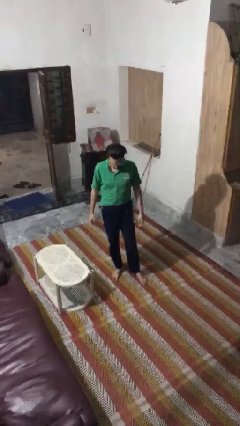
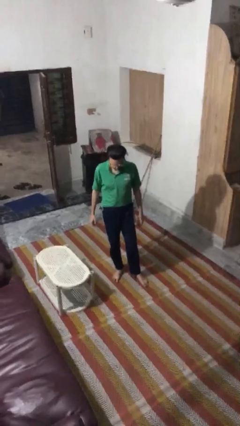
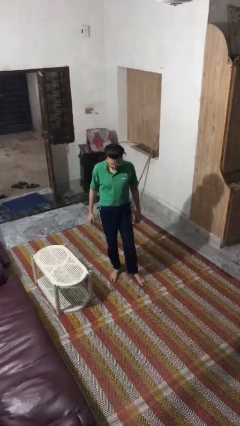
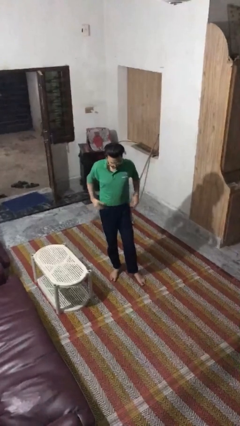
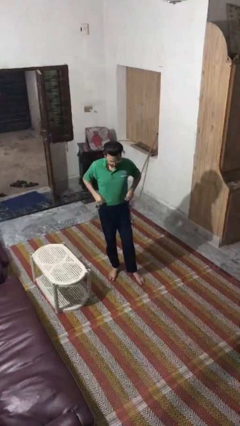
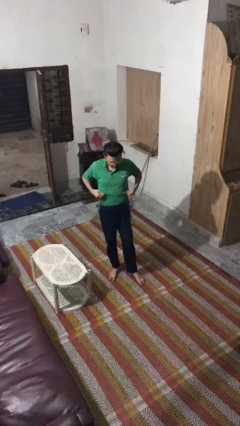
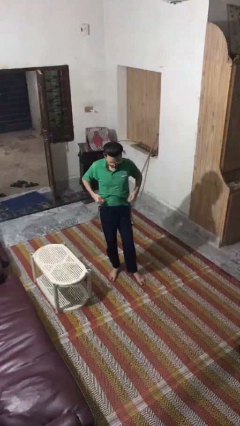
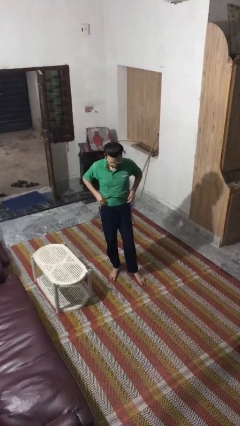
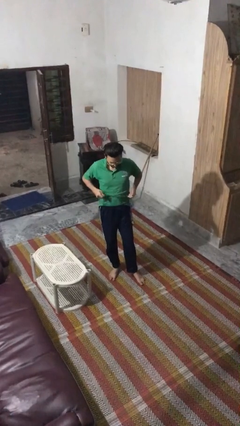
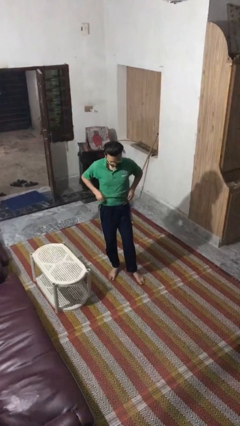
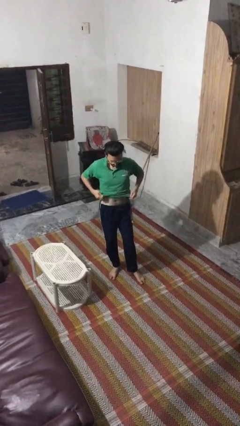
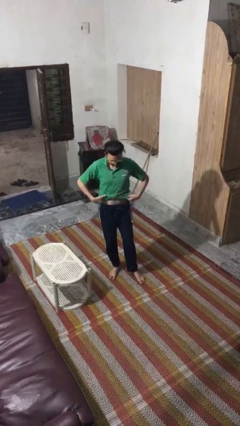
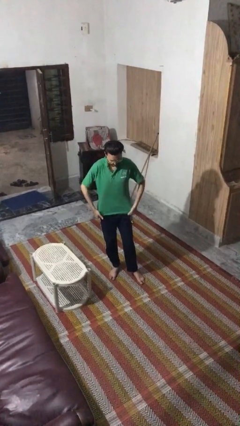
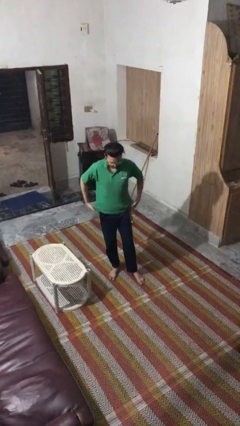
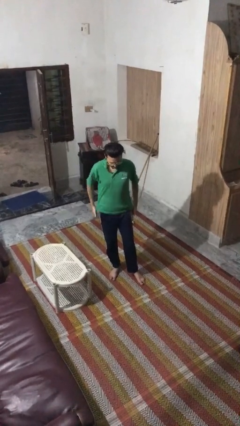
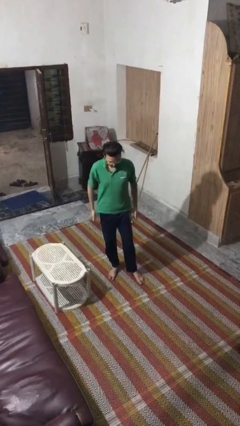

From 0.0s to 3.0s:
person untucks shirt

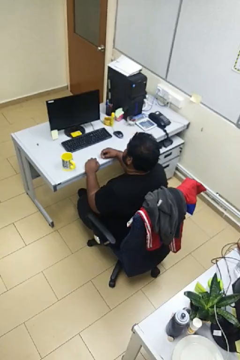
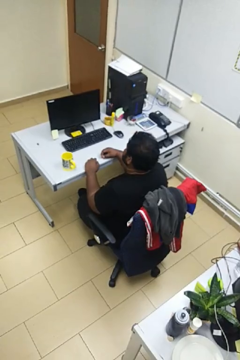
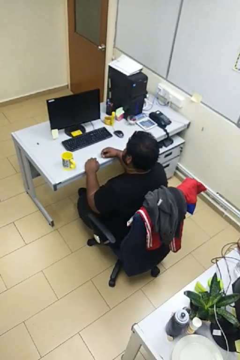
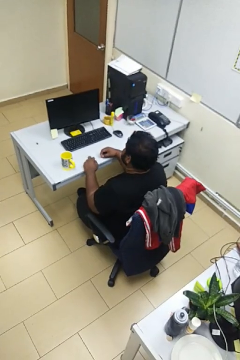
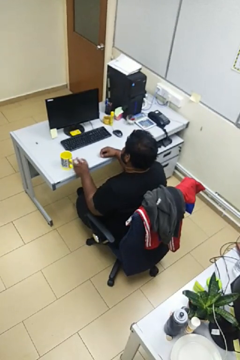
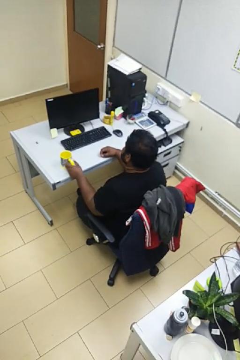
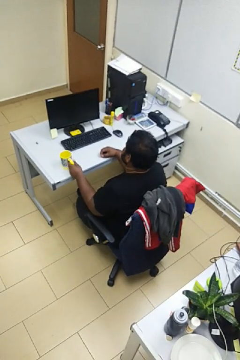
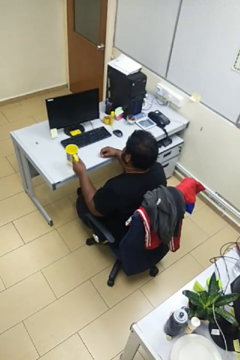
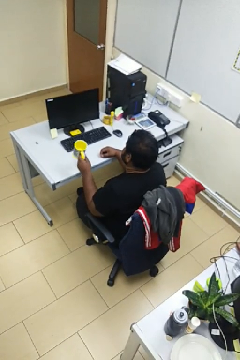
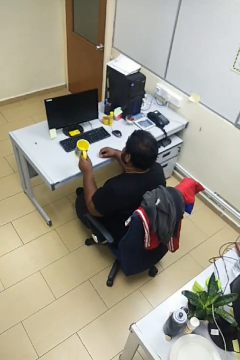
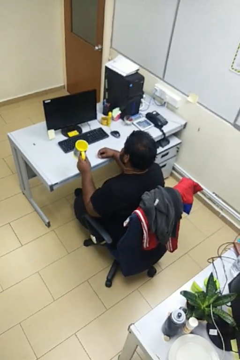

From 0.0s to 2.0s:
person picks up object from table

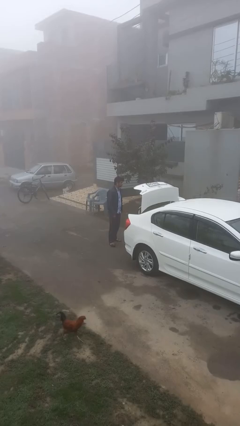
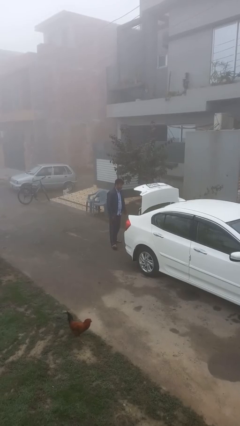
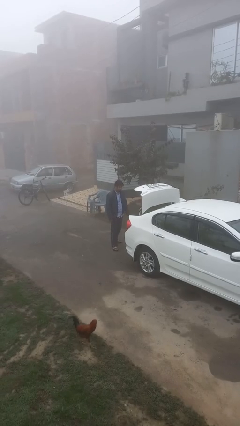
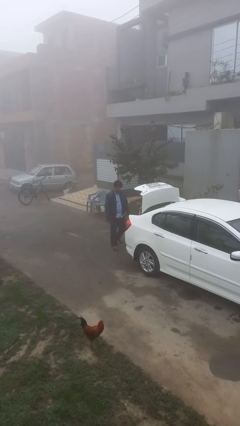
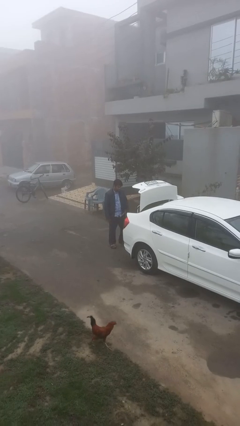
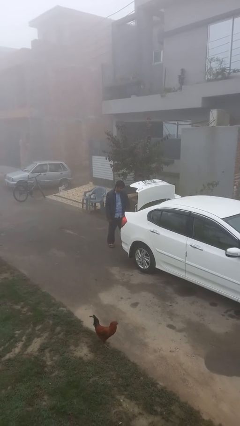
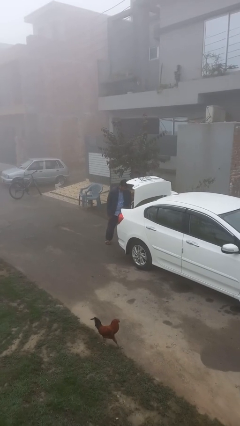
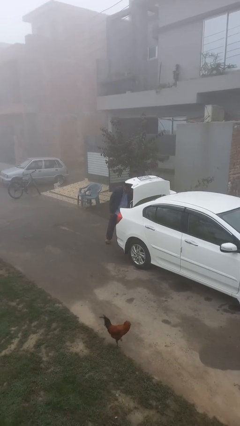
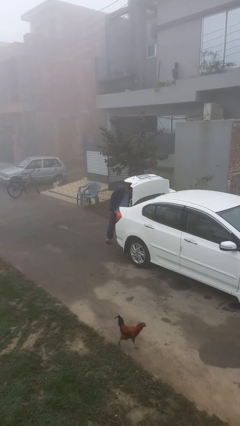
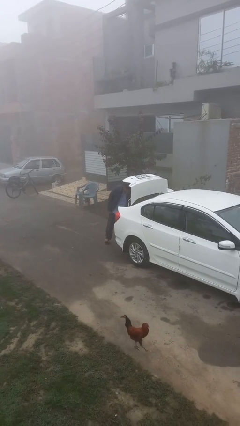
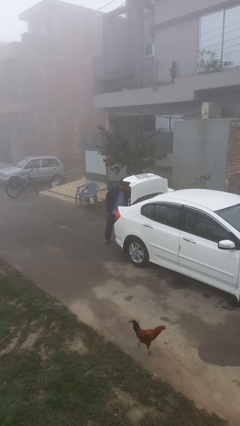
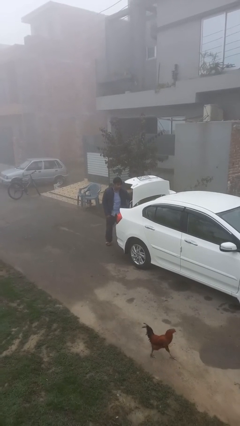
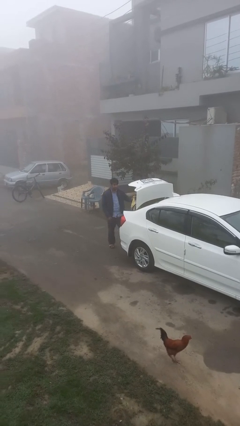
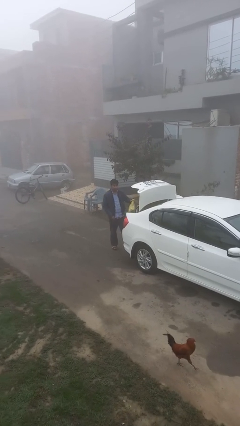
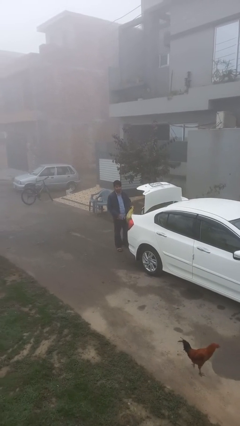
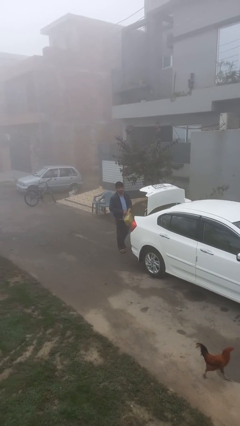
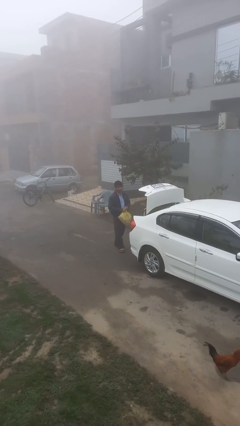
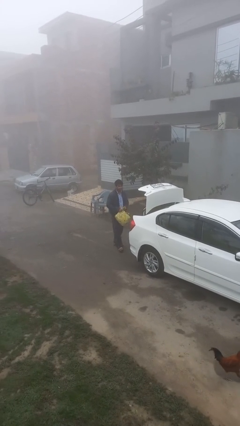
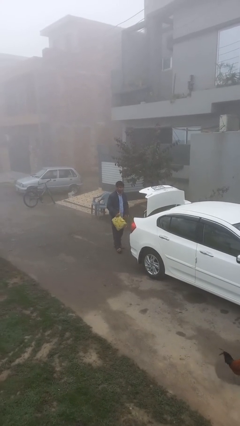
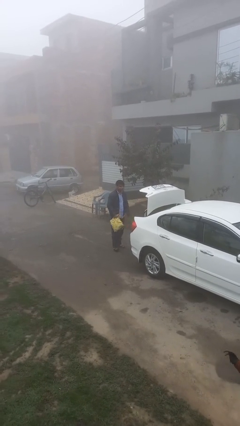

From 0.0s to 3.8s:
person unloads car

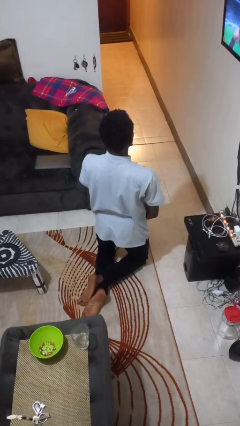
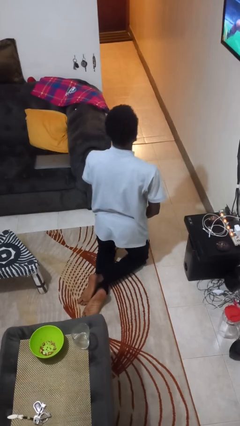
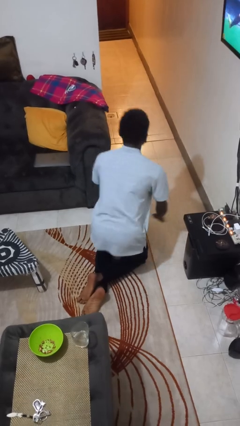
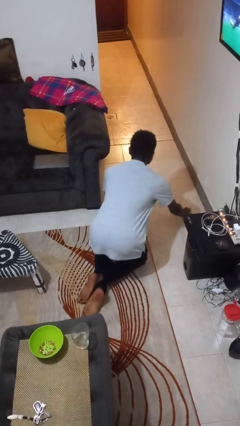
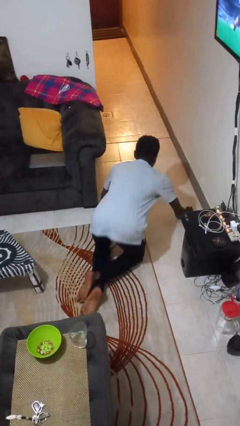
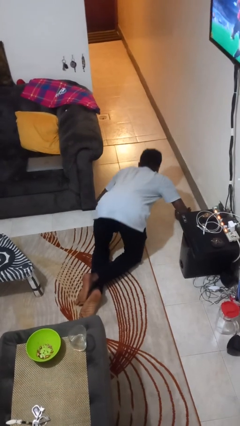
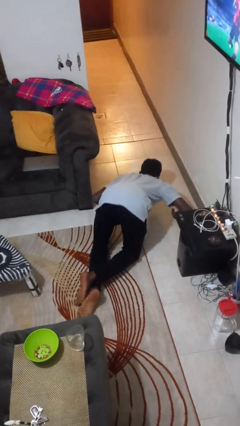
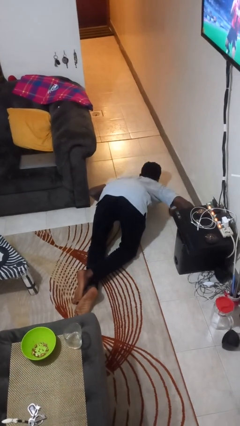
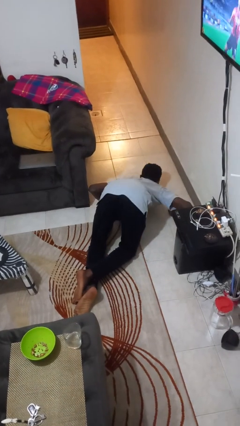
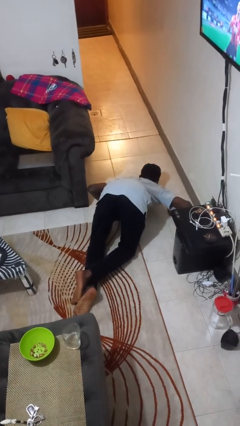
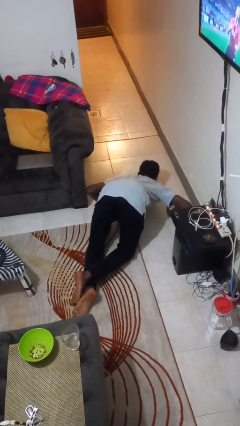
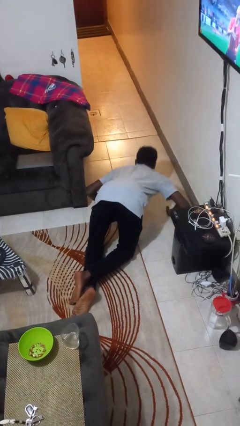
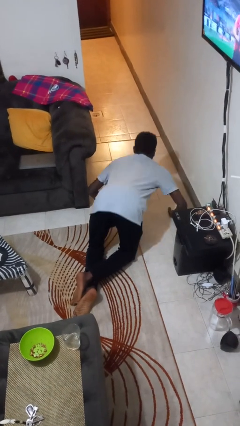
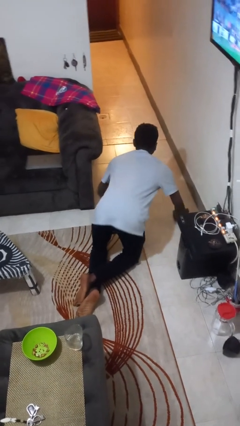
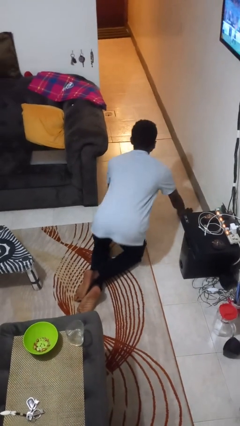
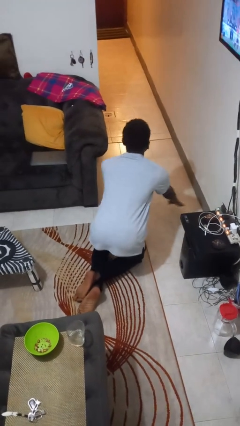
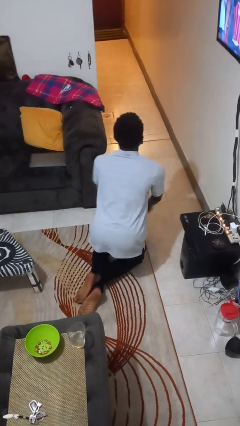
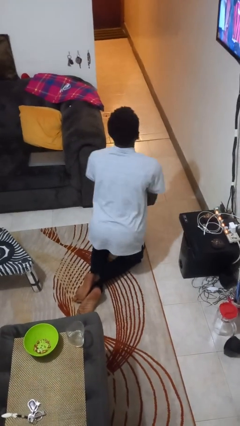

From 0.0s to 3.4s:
person exercises with pushup

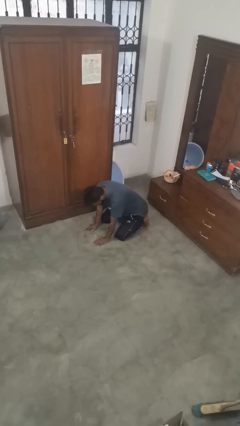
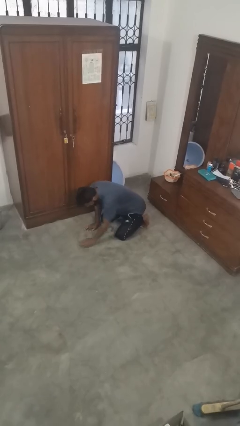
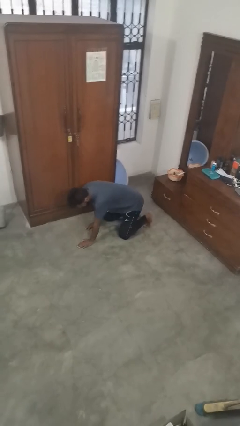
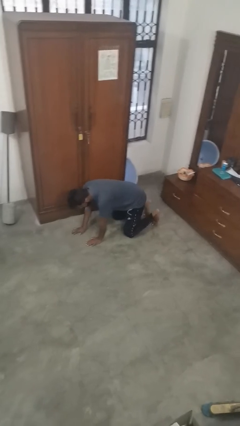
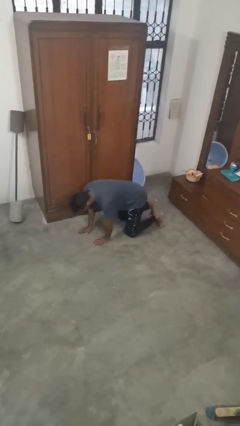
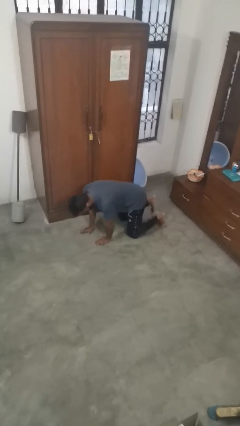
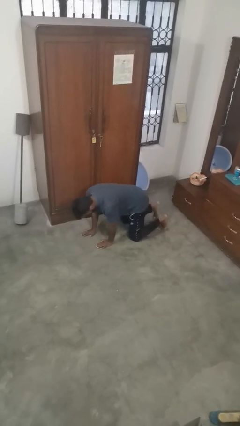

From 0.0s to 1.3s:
person crawls

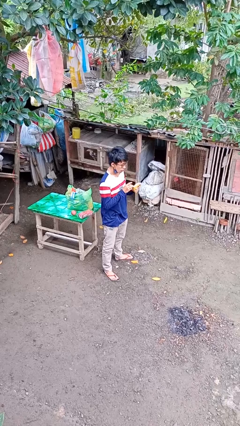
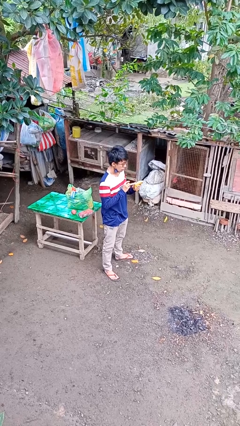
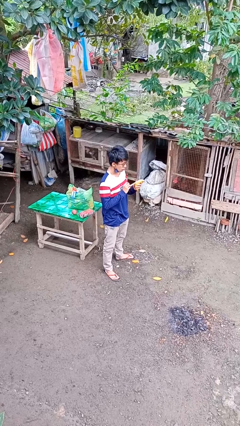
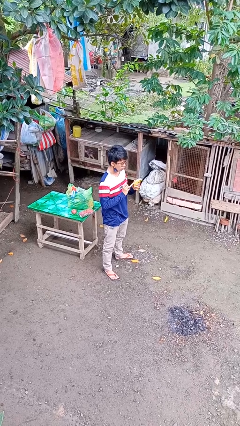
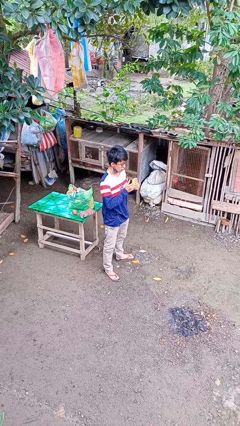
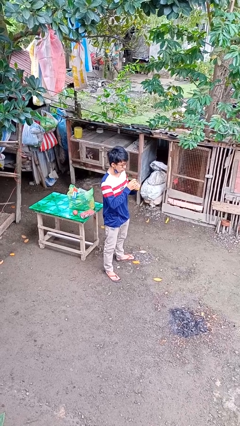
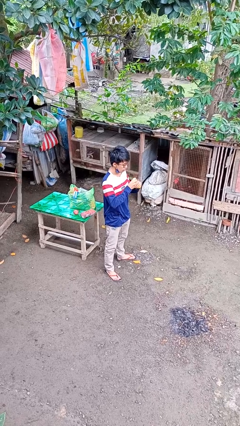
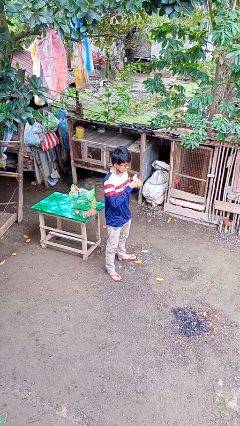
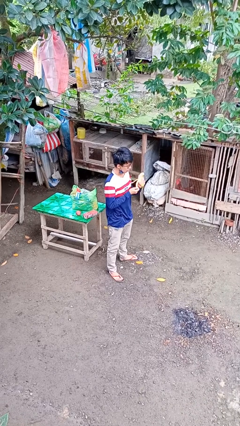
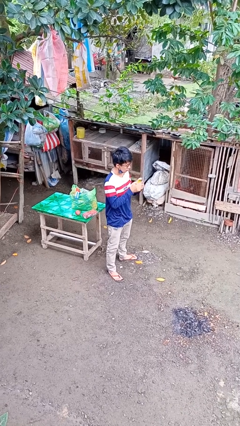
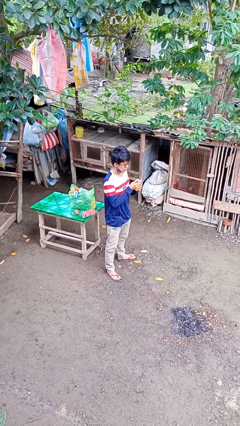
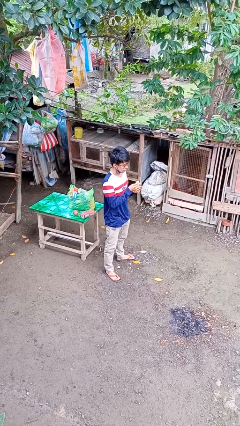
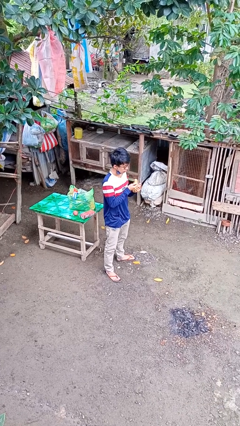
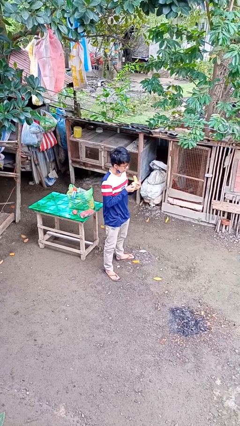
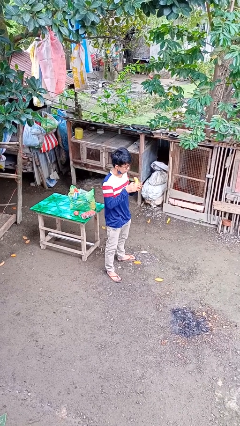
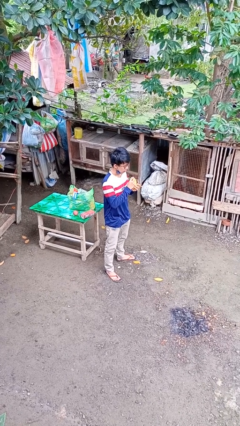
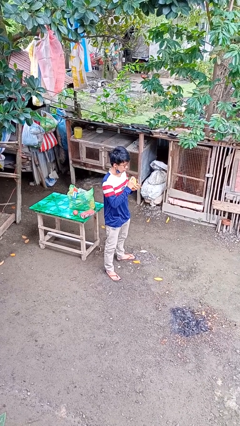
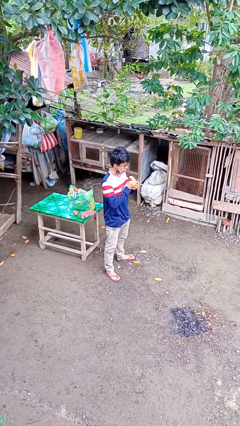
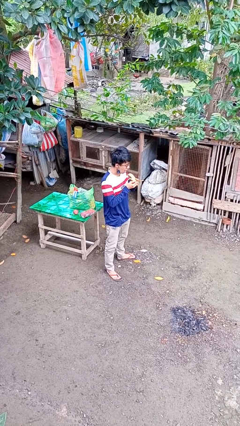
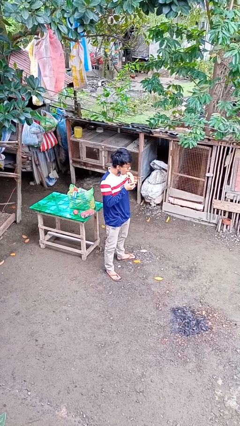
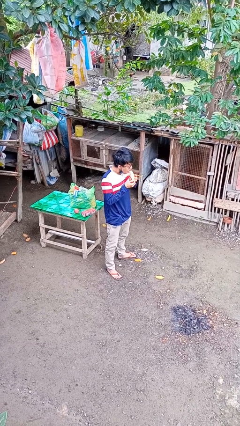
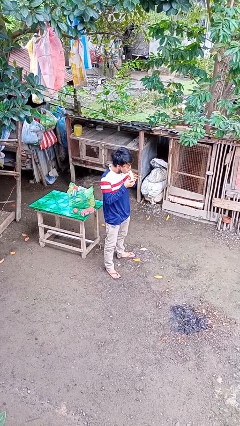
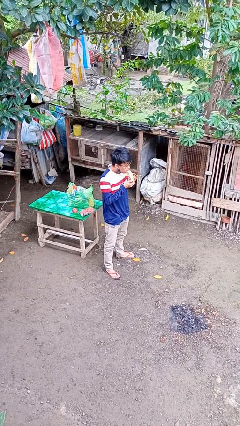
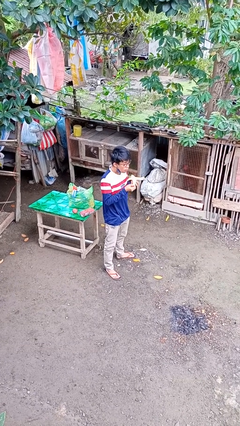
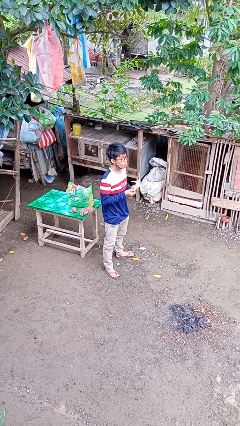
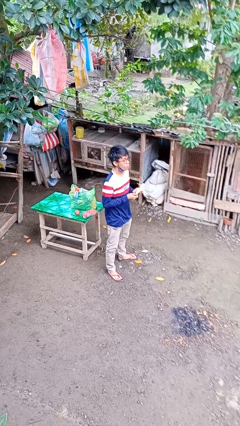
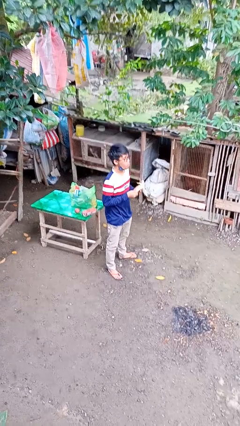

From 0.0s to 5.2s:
person eats banana
